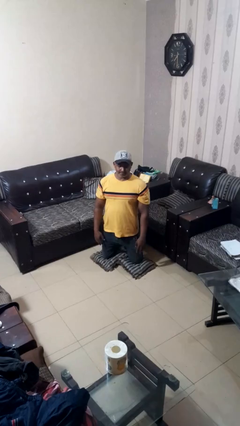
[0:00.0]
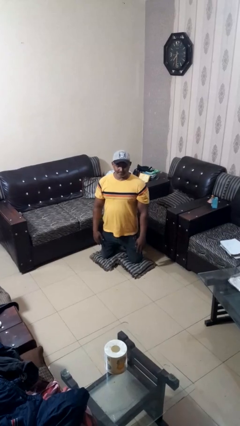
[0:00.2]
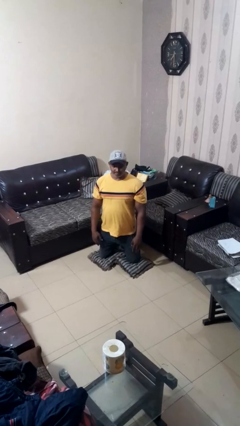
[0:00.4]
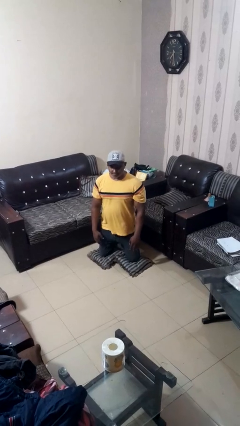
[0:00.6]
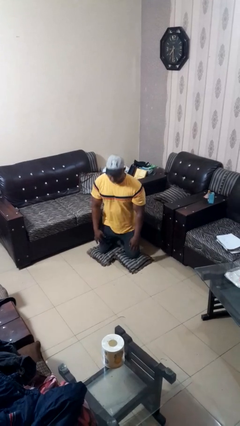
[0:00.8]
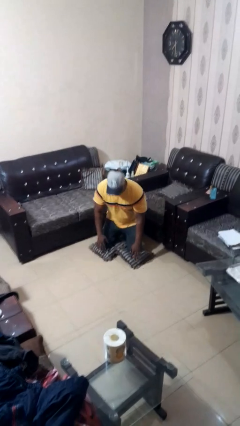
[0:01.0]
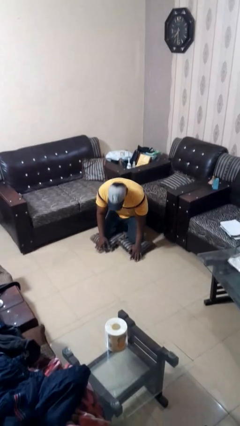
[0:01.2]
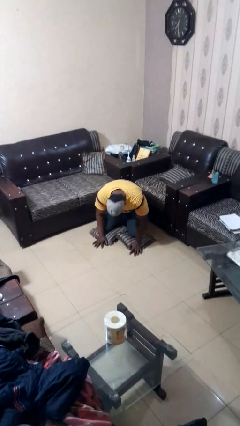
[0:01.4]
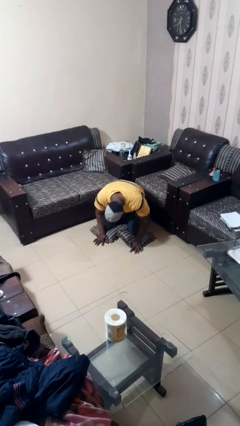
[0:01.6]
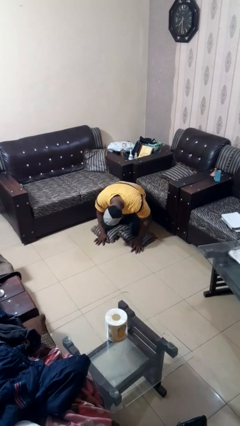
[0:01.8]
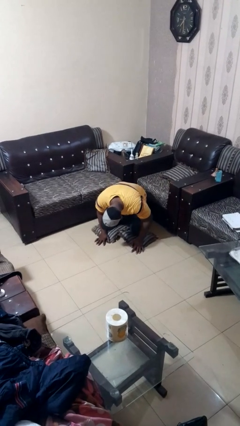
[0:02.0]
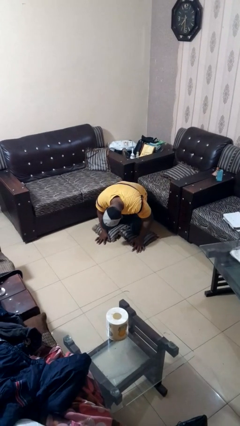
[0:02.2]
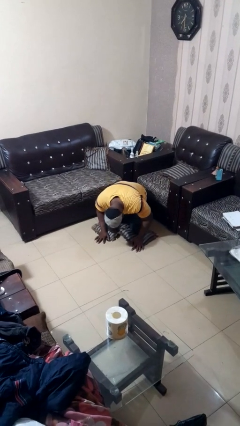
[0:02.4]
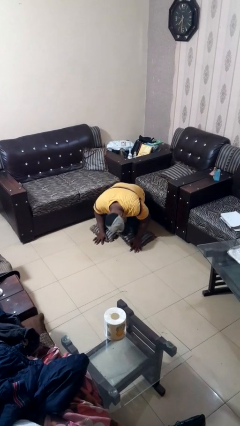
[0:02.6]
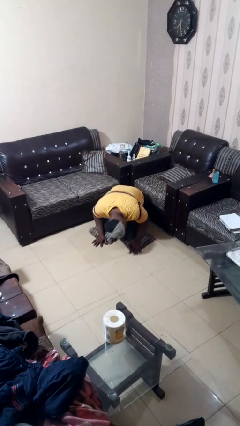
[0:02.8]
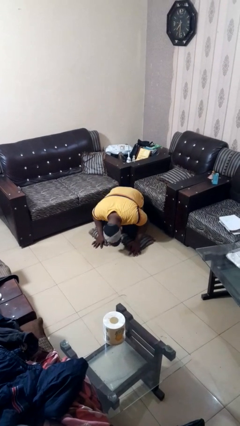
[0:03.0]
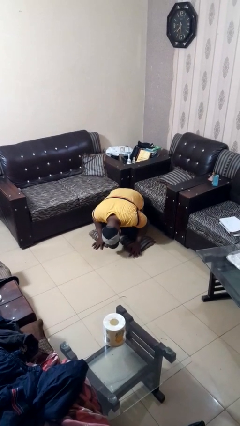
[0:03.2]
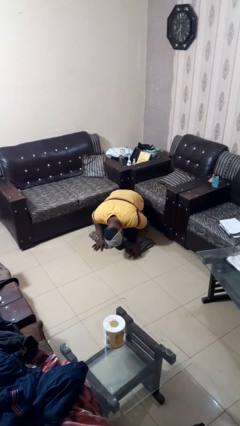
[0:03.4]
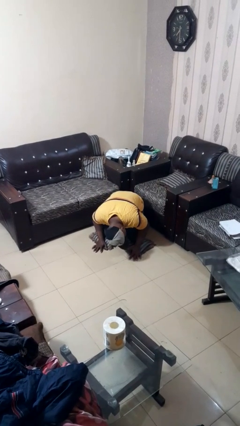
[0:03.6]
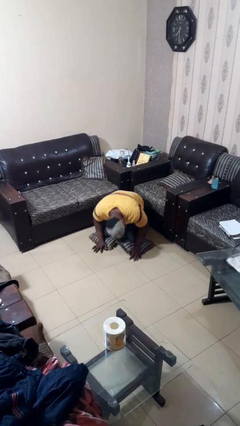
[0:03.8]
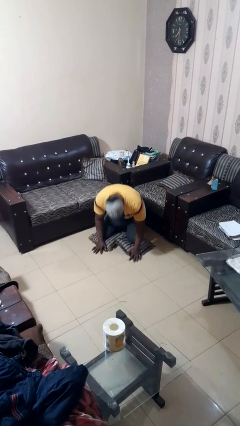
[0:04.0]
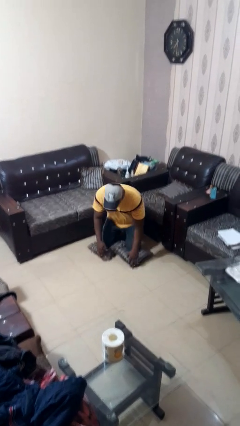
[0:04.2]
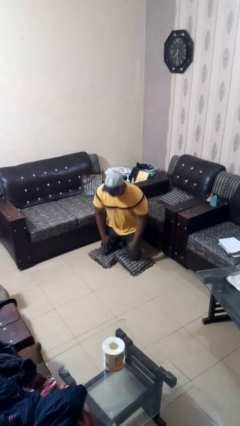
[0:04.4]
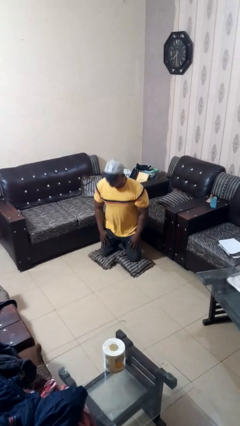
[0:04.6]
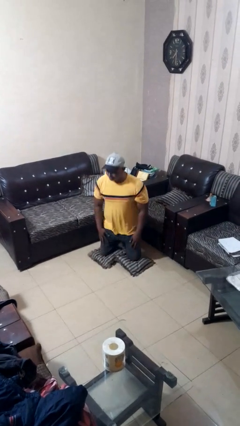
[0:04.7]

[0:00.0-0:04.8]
person searches under couch

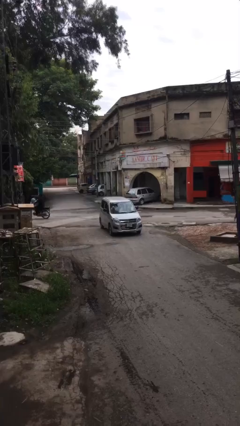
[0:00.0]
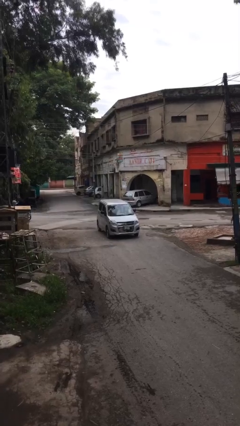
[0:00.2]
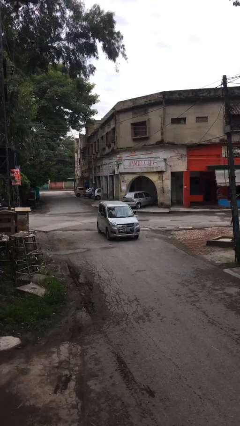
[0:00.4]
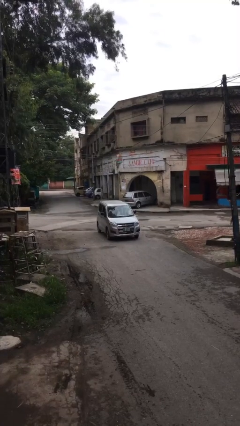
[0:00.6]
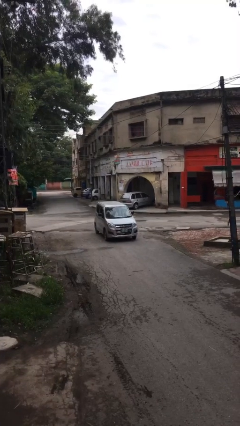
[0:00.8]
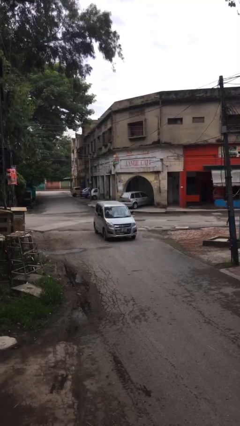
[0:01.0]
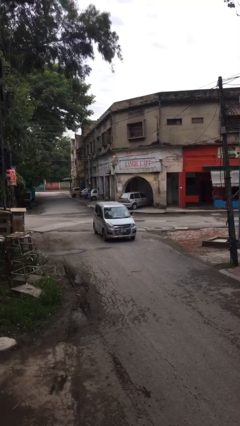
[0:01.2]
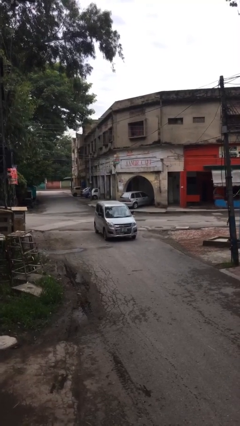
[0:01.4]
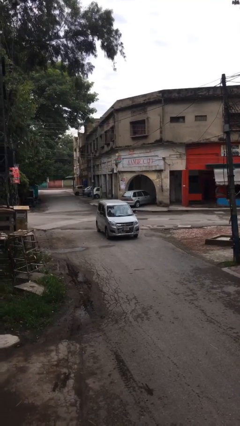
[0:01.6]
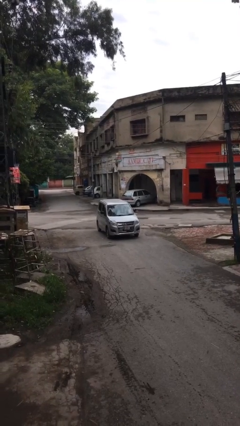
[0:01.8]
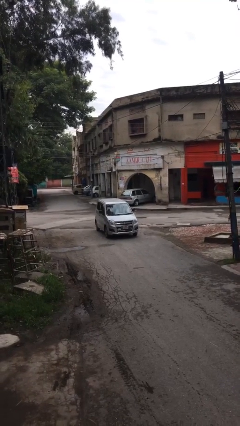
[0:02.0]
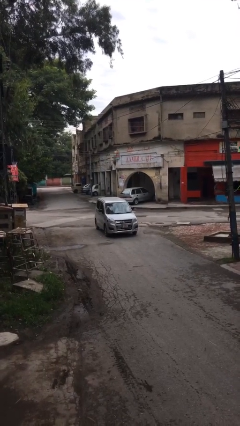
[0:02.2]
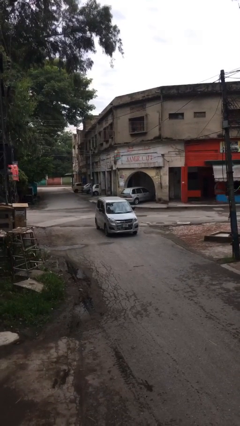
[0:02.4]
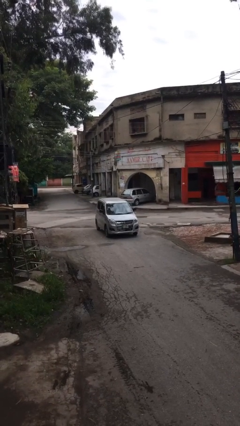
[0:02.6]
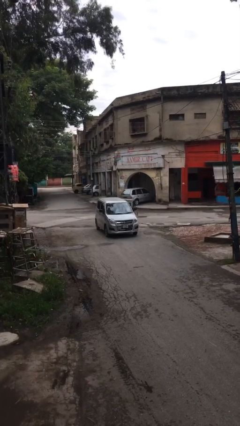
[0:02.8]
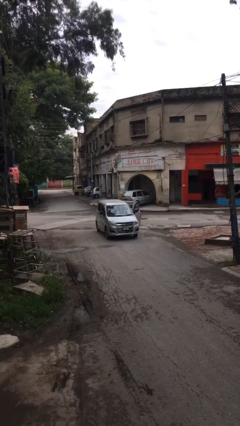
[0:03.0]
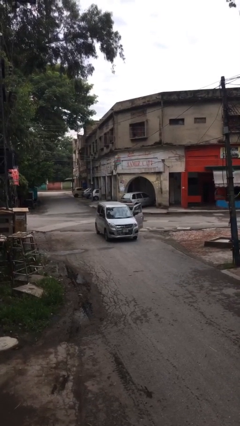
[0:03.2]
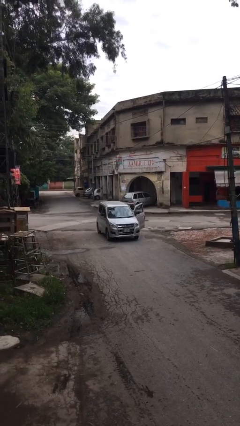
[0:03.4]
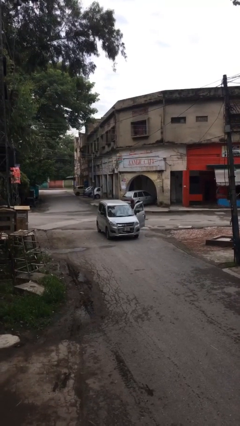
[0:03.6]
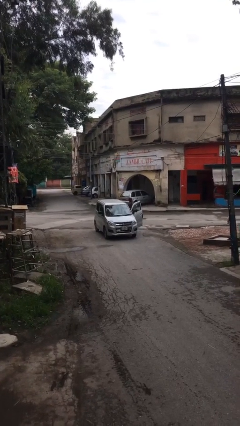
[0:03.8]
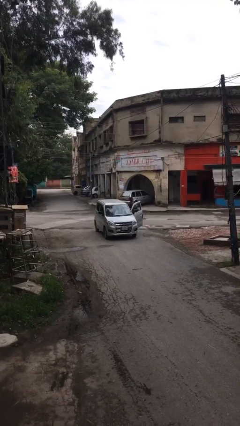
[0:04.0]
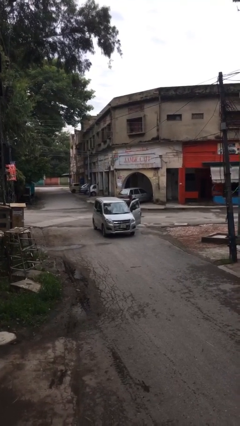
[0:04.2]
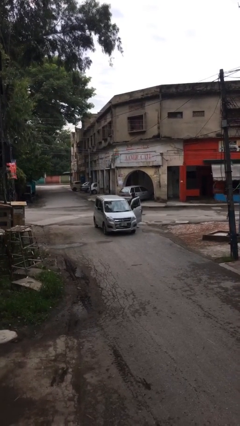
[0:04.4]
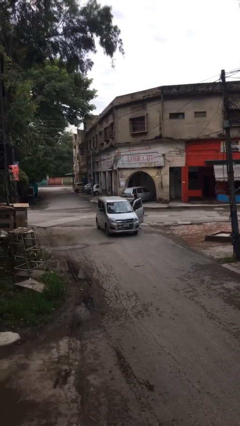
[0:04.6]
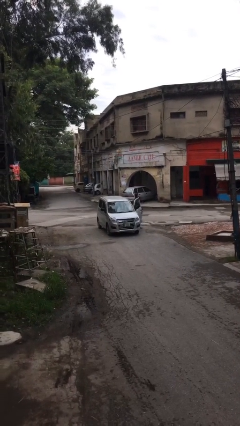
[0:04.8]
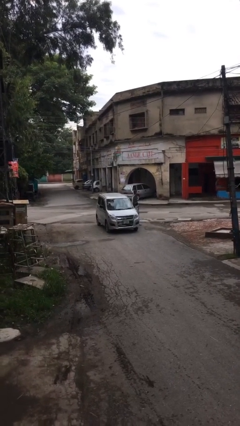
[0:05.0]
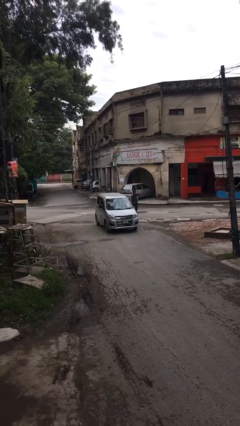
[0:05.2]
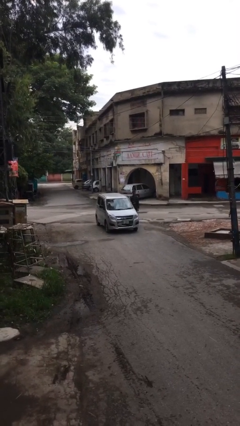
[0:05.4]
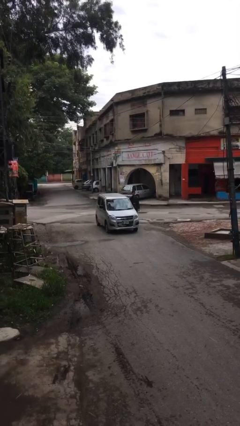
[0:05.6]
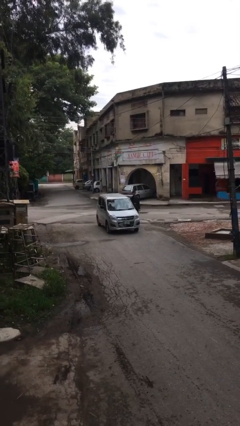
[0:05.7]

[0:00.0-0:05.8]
car drops off person

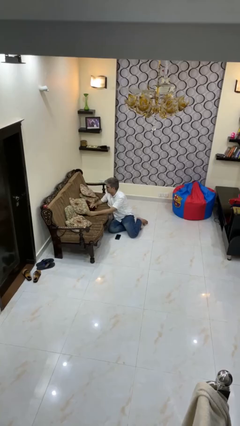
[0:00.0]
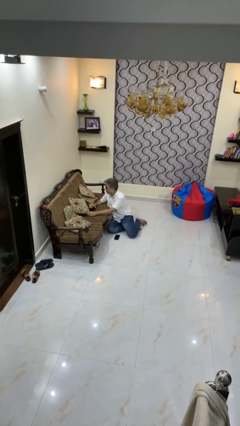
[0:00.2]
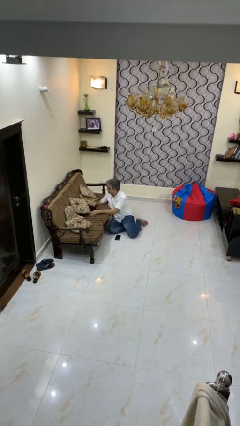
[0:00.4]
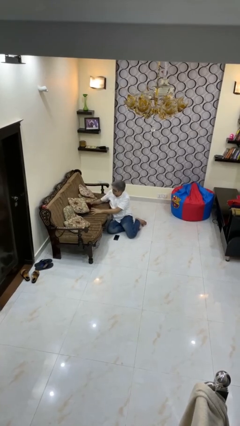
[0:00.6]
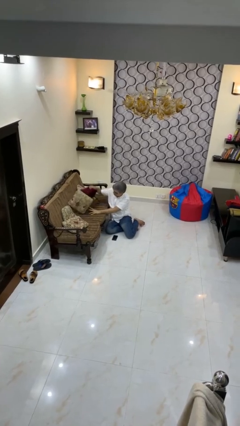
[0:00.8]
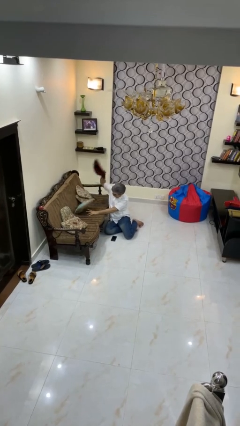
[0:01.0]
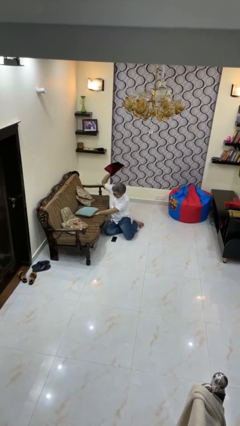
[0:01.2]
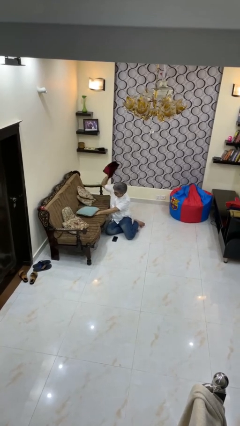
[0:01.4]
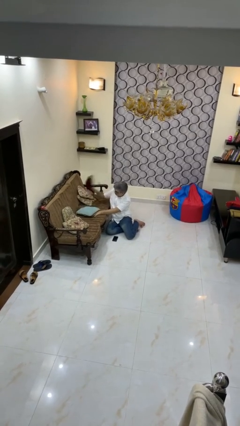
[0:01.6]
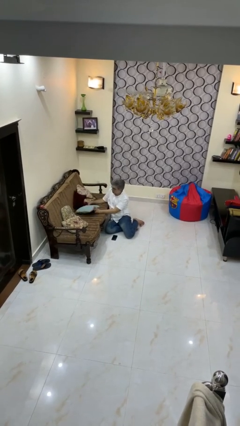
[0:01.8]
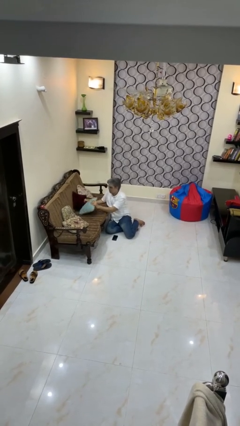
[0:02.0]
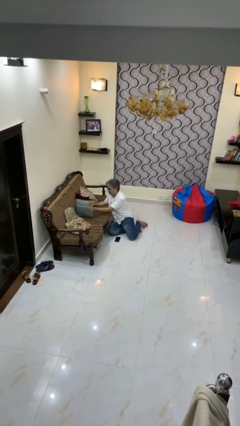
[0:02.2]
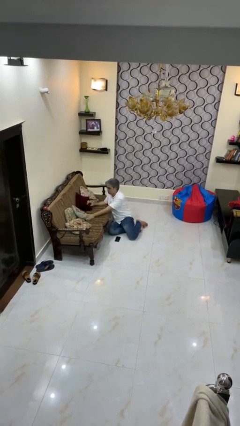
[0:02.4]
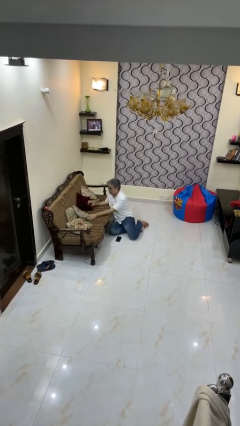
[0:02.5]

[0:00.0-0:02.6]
person searches in couch

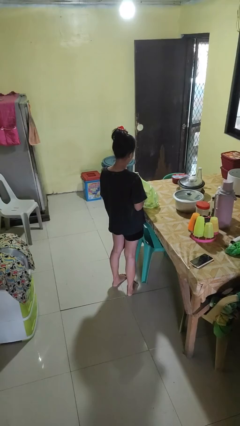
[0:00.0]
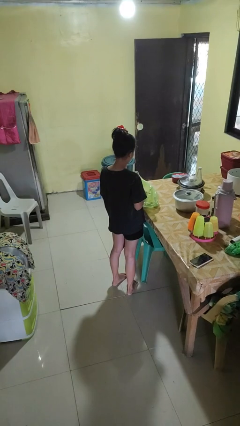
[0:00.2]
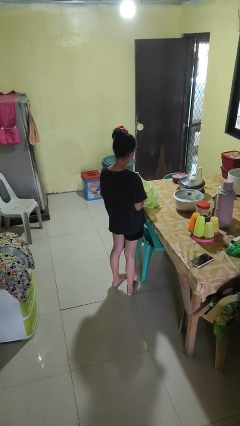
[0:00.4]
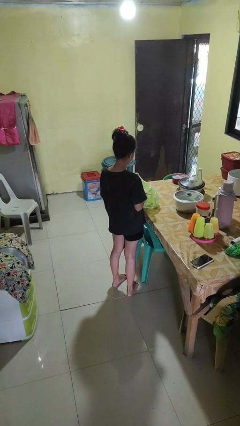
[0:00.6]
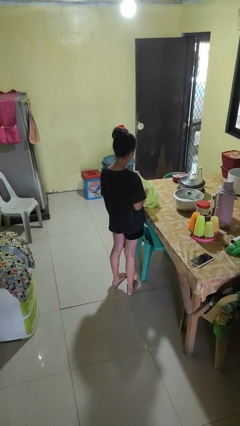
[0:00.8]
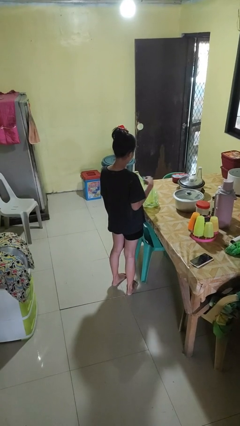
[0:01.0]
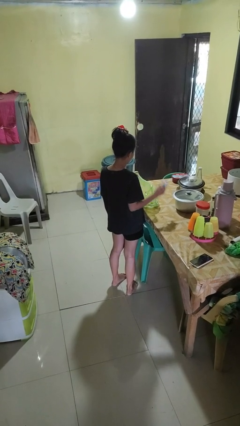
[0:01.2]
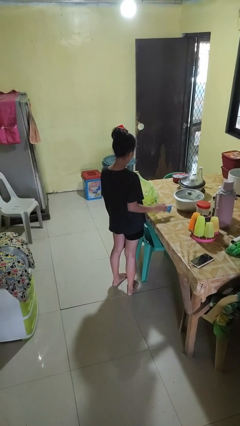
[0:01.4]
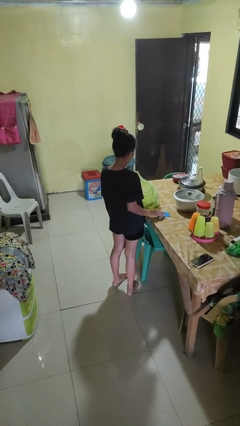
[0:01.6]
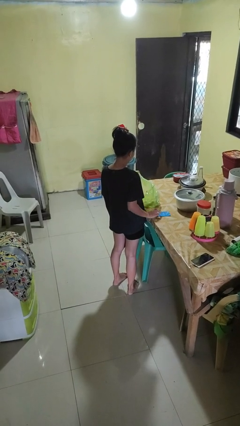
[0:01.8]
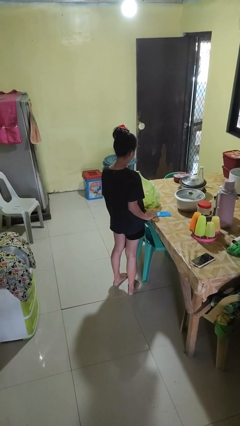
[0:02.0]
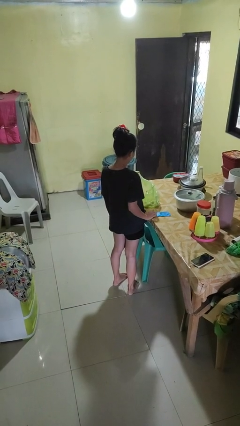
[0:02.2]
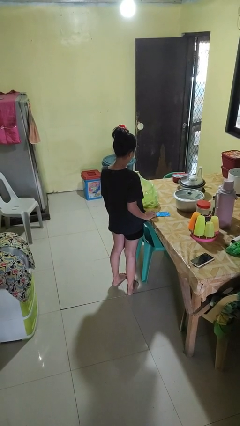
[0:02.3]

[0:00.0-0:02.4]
person takes object from bag

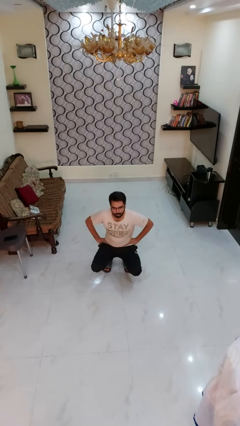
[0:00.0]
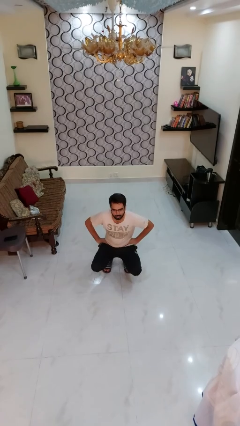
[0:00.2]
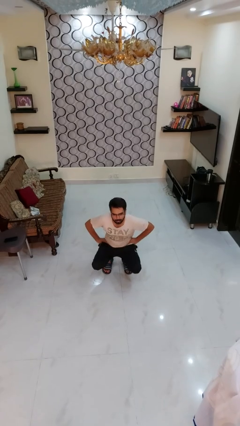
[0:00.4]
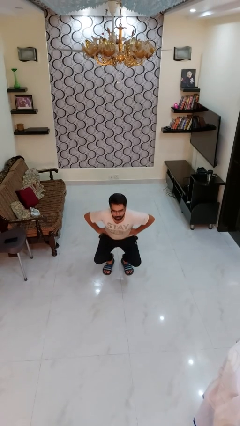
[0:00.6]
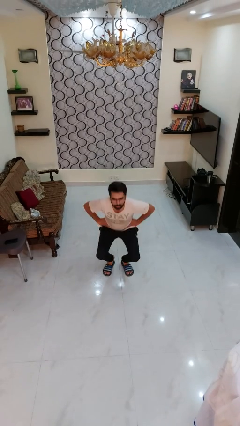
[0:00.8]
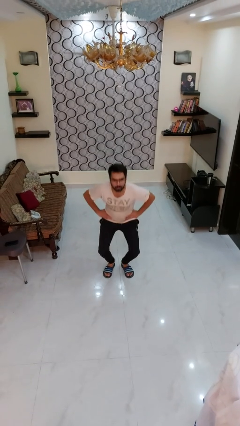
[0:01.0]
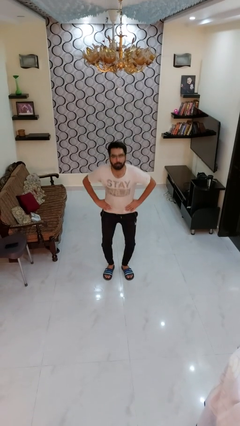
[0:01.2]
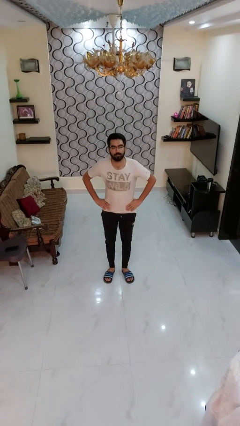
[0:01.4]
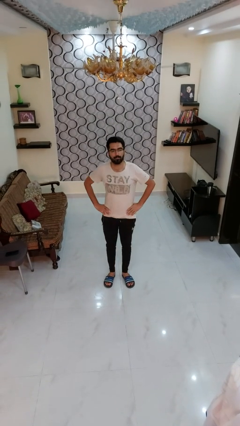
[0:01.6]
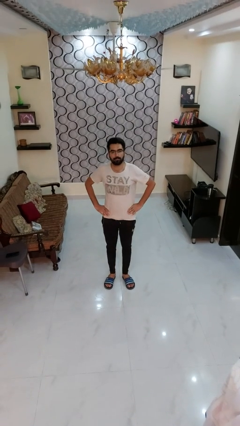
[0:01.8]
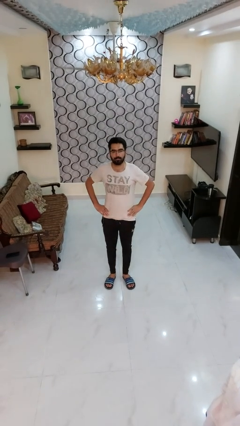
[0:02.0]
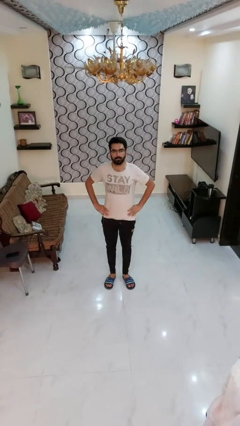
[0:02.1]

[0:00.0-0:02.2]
person stands up
